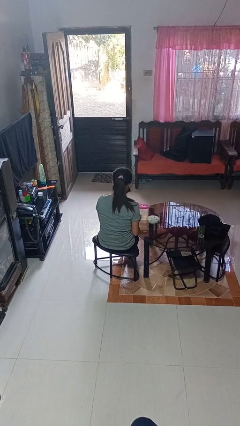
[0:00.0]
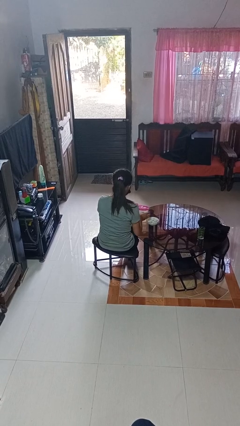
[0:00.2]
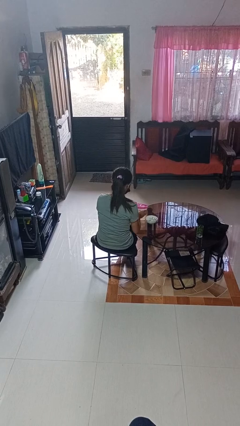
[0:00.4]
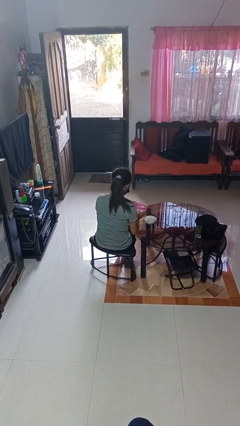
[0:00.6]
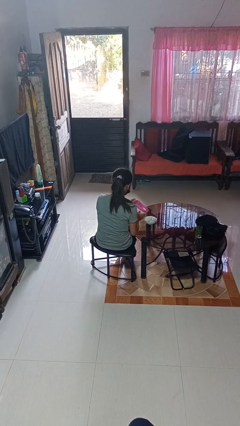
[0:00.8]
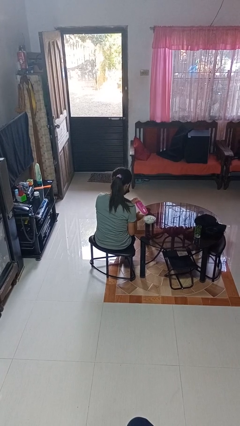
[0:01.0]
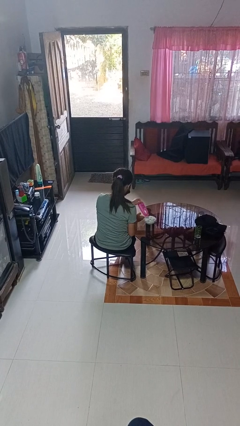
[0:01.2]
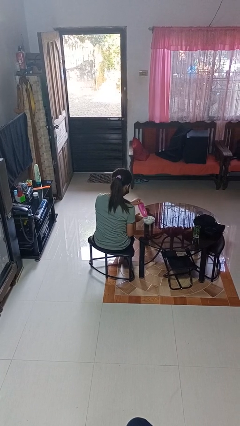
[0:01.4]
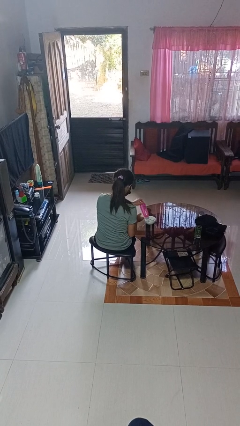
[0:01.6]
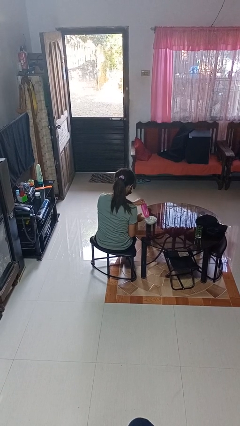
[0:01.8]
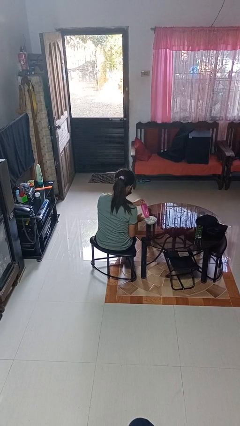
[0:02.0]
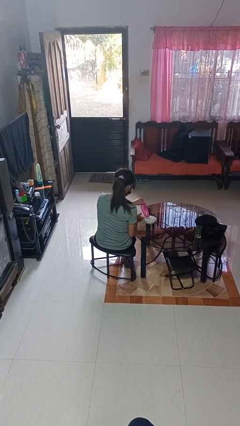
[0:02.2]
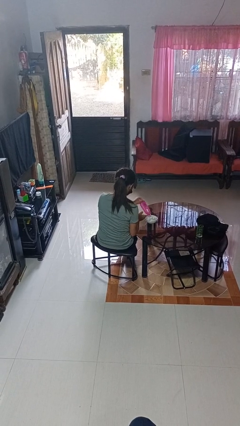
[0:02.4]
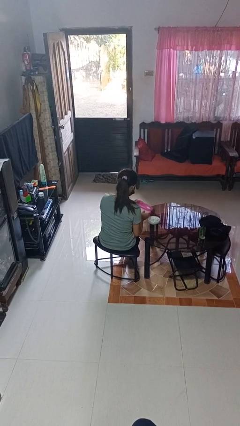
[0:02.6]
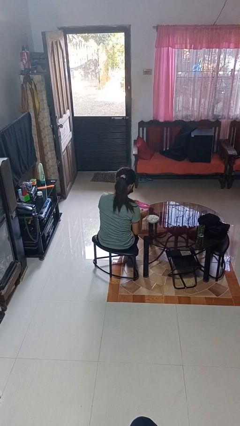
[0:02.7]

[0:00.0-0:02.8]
person pours into bowl

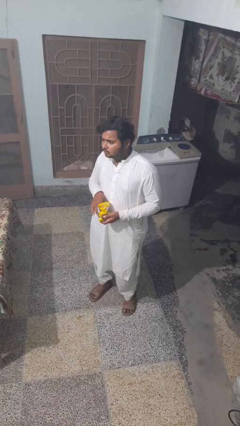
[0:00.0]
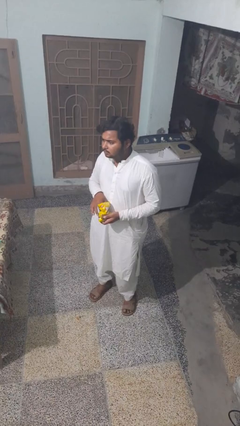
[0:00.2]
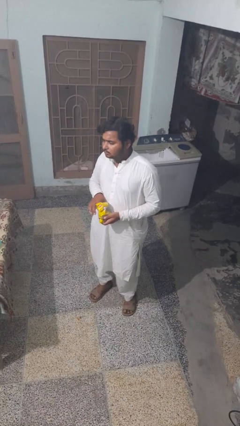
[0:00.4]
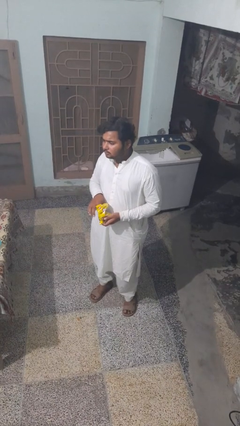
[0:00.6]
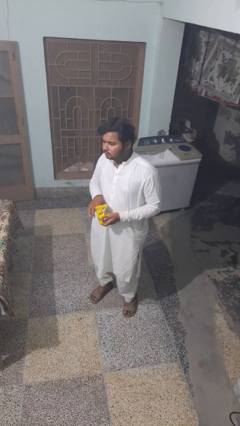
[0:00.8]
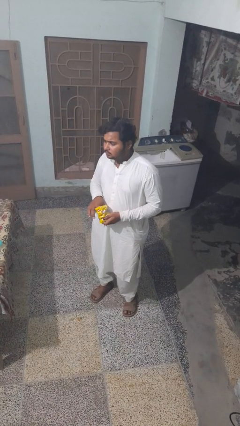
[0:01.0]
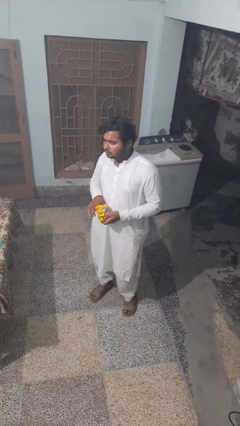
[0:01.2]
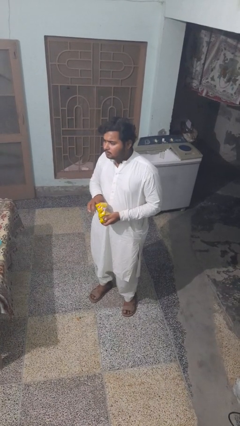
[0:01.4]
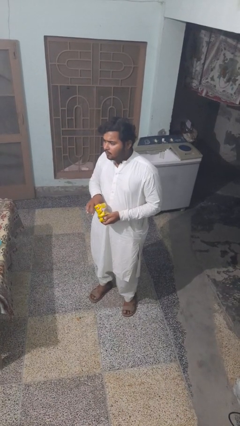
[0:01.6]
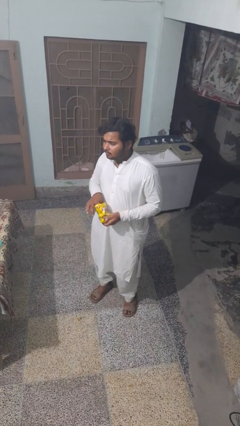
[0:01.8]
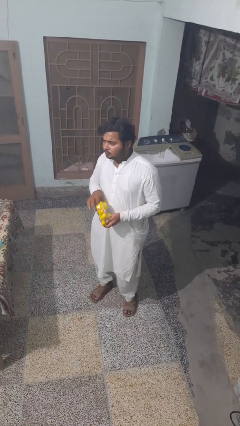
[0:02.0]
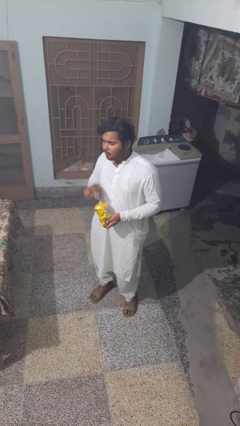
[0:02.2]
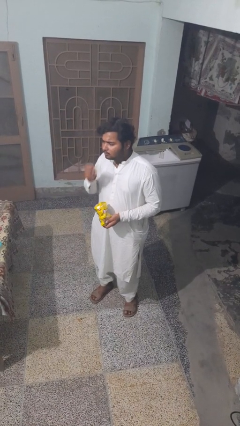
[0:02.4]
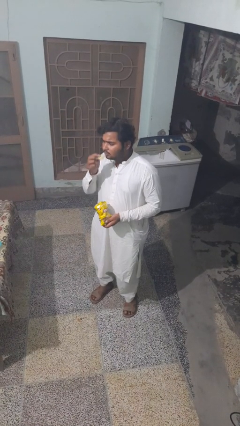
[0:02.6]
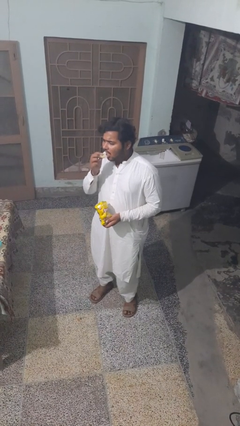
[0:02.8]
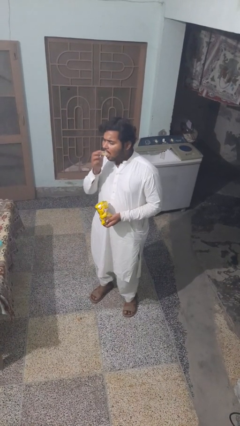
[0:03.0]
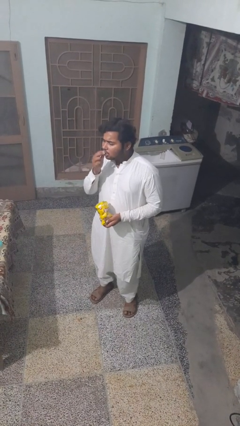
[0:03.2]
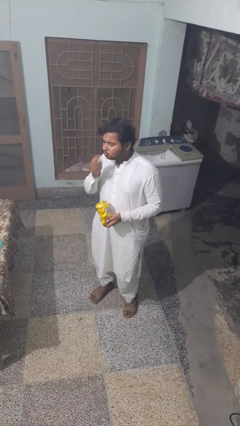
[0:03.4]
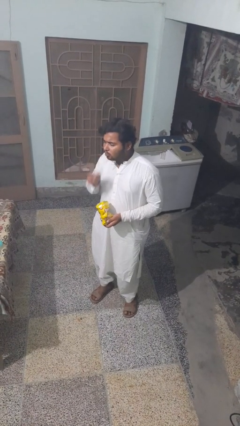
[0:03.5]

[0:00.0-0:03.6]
person eats snack from bag

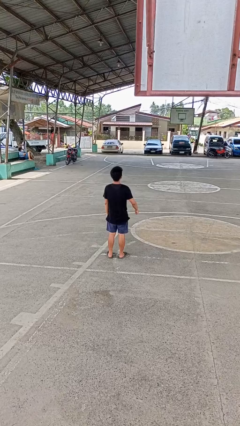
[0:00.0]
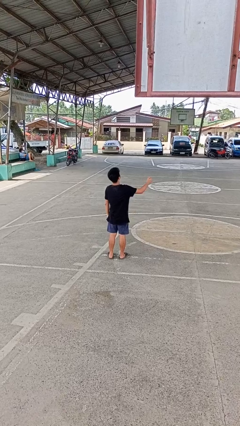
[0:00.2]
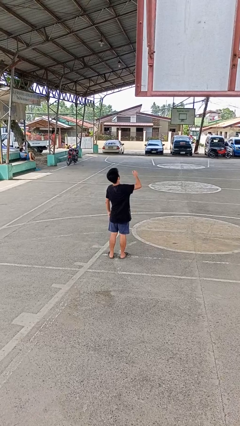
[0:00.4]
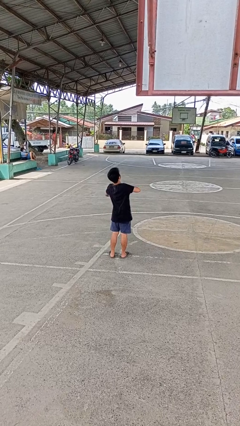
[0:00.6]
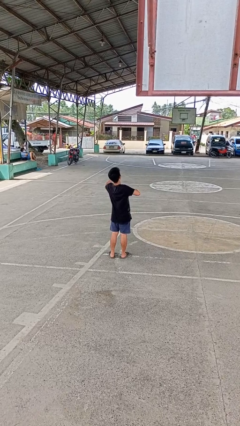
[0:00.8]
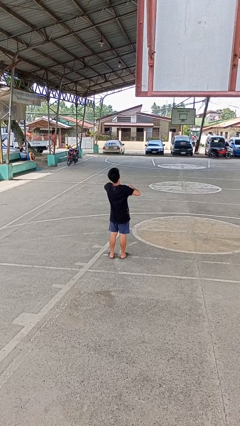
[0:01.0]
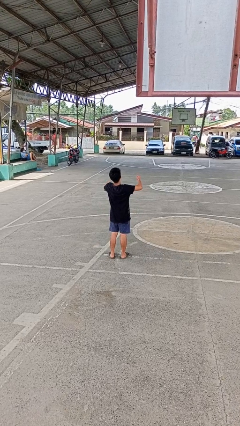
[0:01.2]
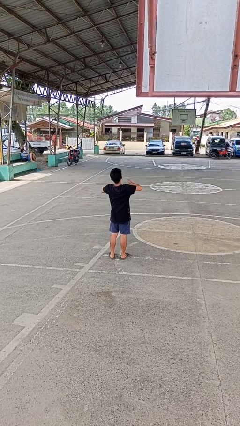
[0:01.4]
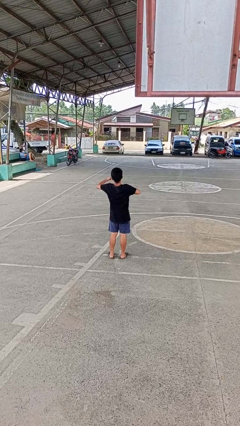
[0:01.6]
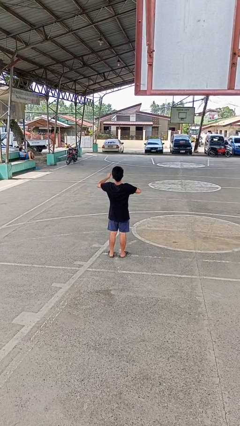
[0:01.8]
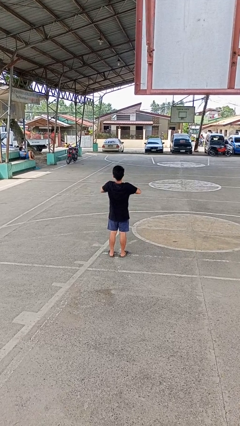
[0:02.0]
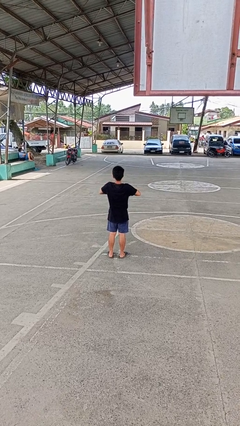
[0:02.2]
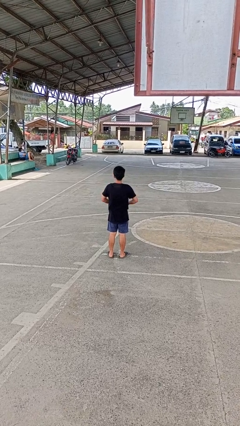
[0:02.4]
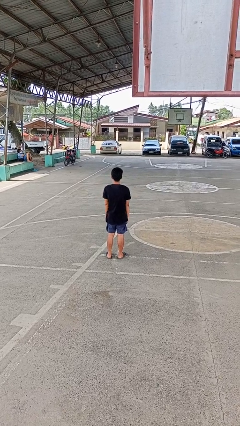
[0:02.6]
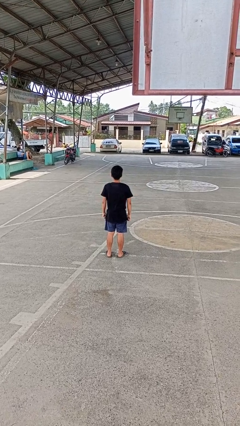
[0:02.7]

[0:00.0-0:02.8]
person drums on chest

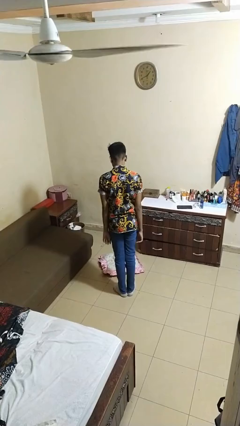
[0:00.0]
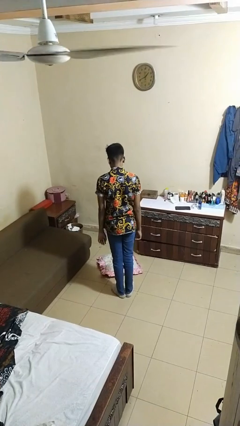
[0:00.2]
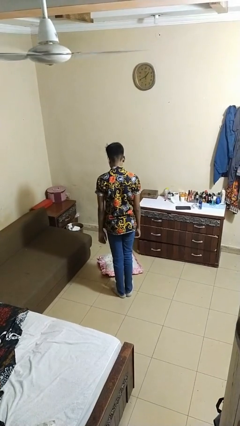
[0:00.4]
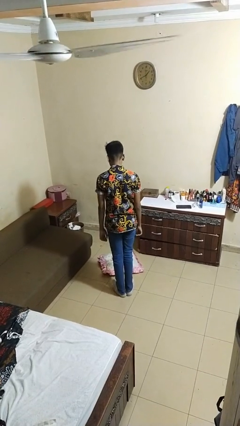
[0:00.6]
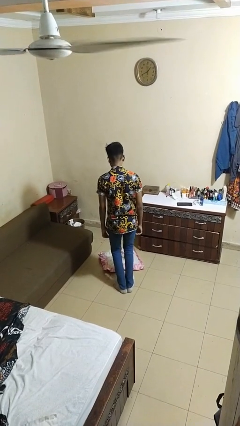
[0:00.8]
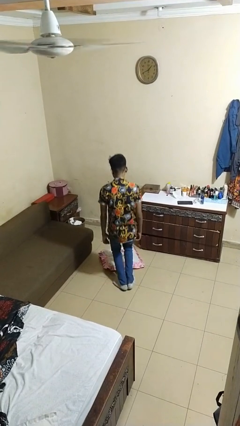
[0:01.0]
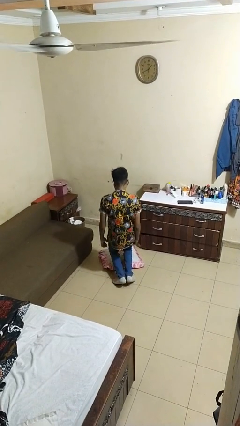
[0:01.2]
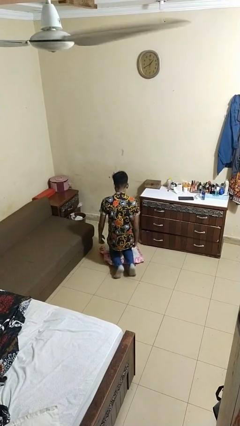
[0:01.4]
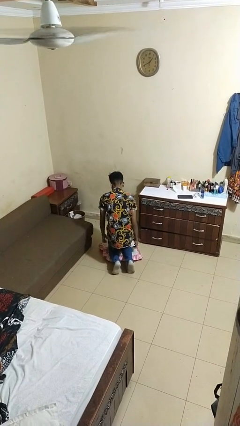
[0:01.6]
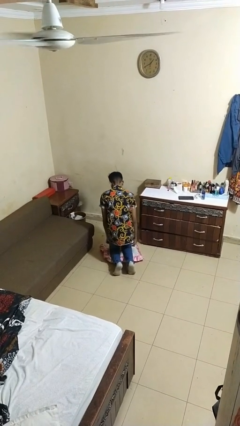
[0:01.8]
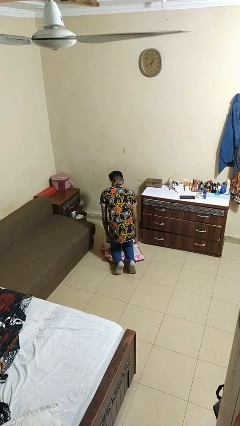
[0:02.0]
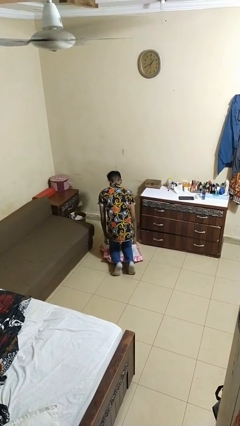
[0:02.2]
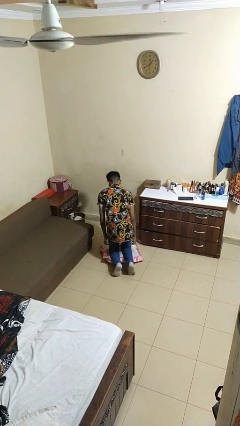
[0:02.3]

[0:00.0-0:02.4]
person kneels

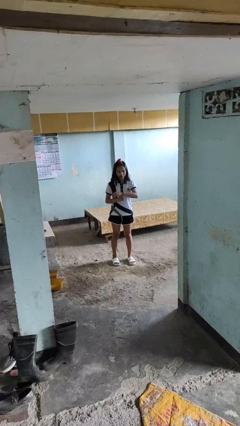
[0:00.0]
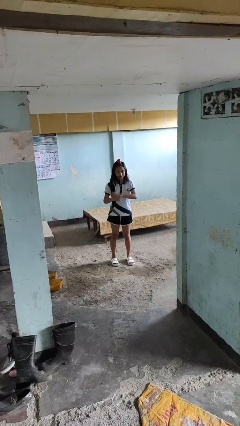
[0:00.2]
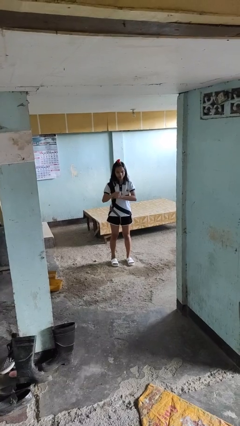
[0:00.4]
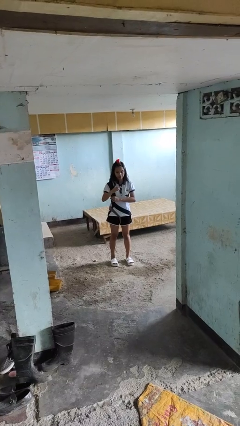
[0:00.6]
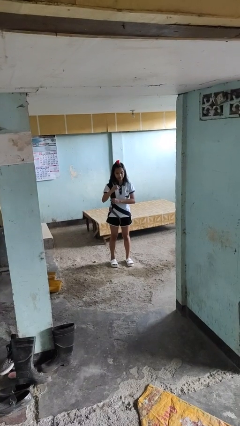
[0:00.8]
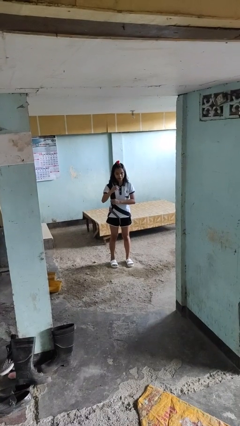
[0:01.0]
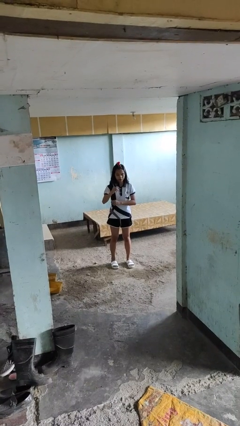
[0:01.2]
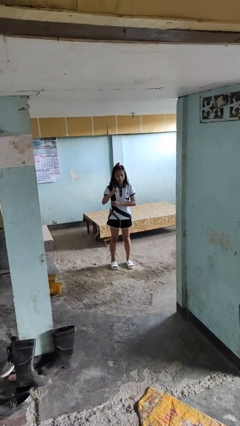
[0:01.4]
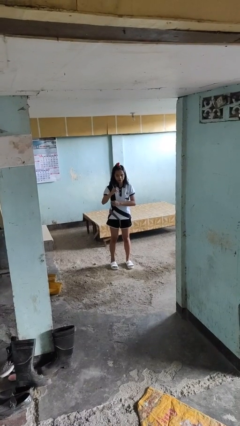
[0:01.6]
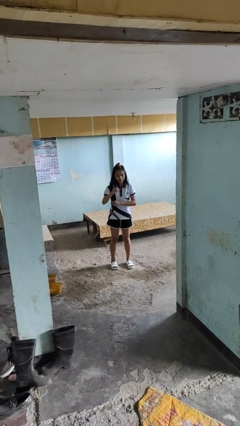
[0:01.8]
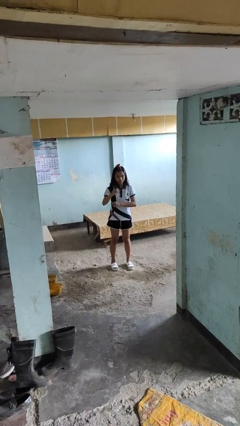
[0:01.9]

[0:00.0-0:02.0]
person takes off wristwatch

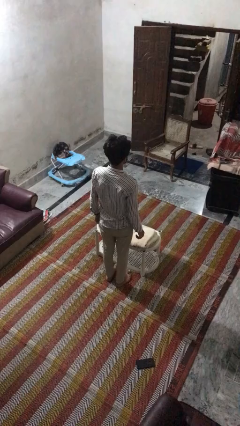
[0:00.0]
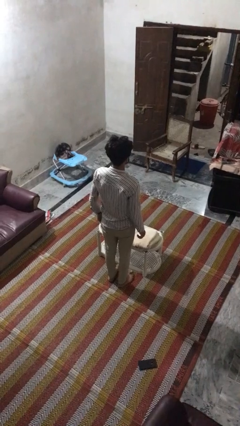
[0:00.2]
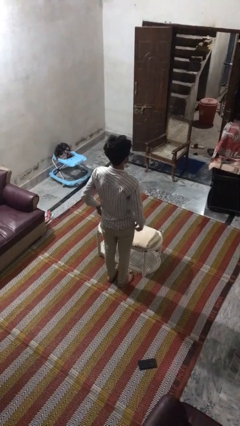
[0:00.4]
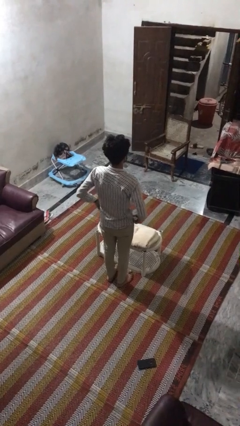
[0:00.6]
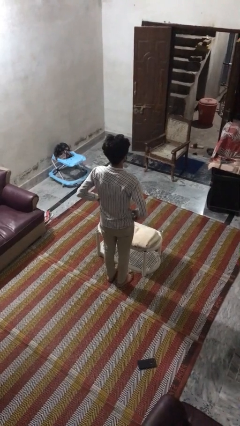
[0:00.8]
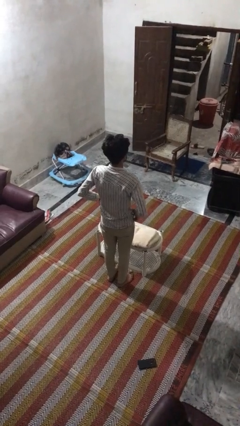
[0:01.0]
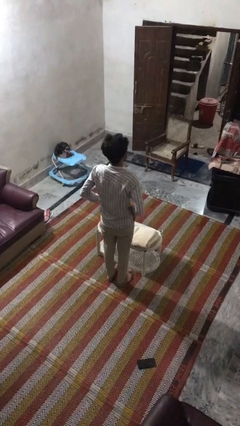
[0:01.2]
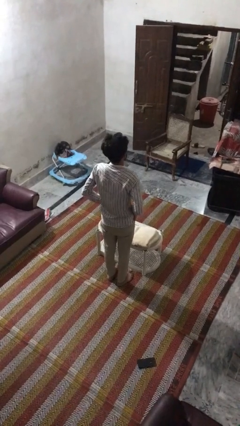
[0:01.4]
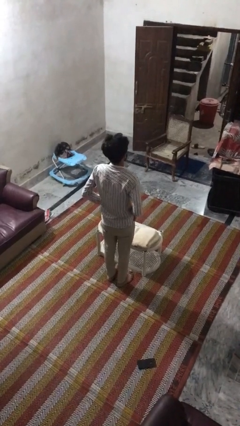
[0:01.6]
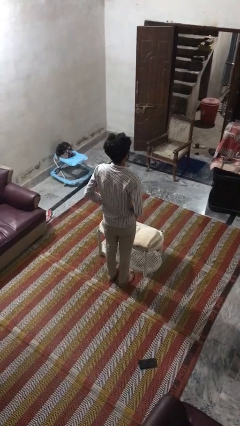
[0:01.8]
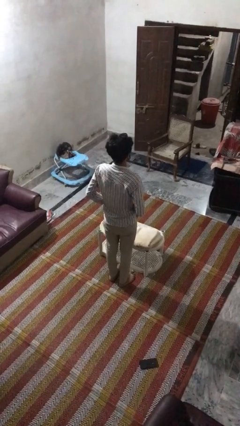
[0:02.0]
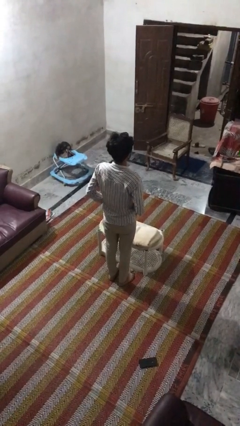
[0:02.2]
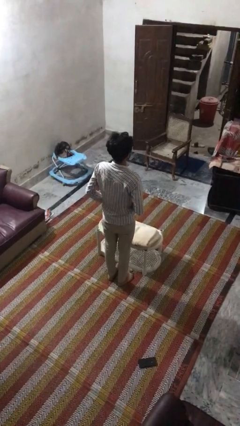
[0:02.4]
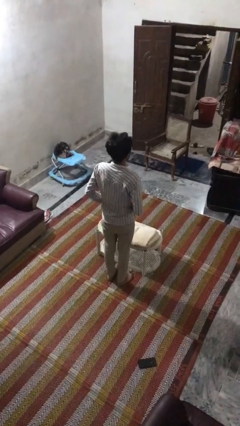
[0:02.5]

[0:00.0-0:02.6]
person puts hands in back pockets

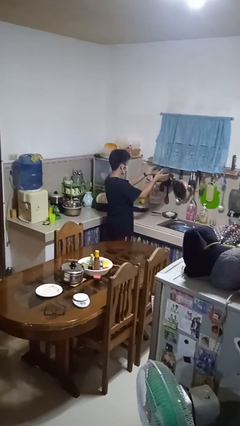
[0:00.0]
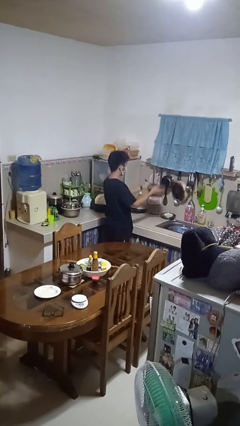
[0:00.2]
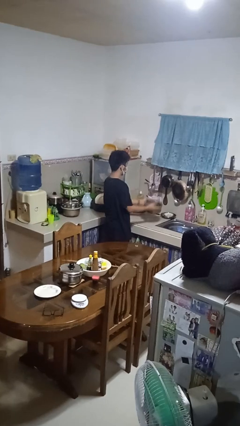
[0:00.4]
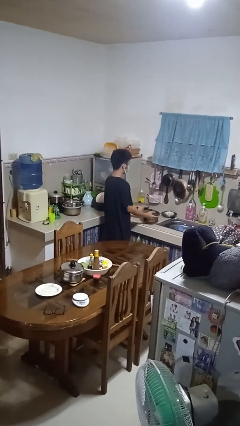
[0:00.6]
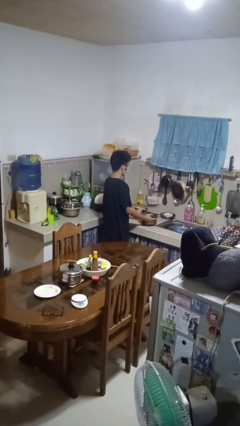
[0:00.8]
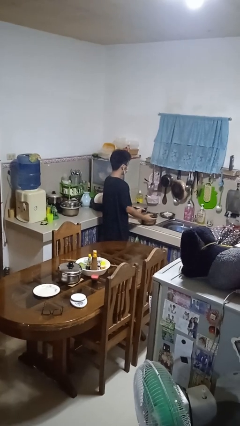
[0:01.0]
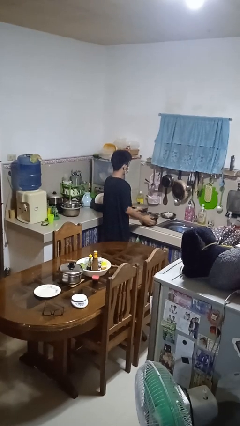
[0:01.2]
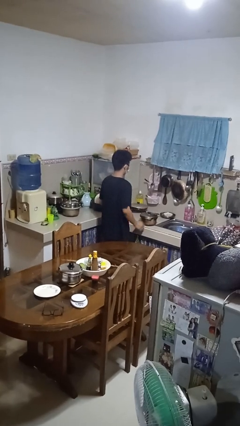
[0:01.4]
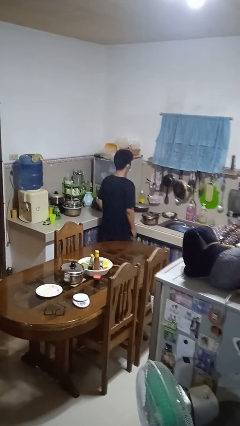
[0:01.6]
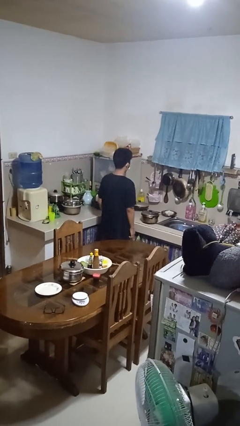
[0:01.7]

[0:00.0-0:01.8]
person puts down object on countertop
